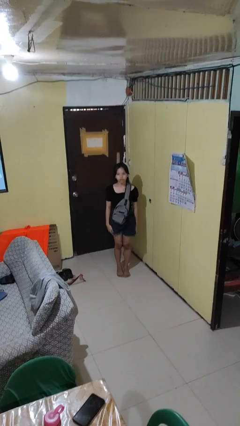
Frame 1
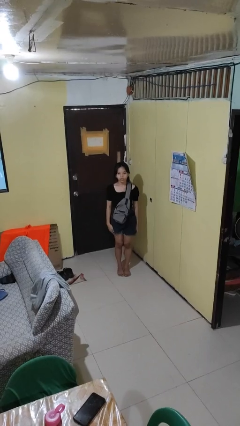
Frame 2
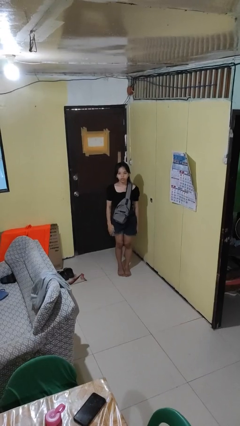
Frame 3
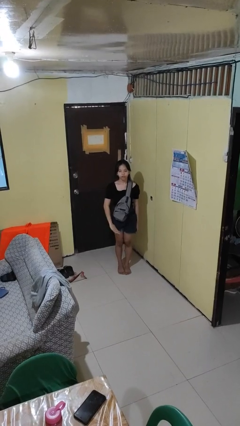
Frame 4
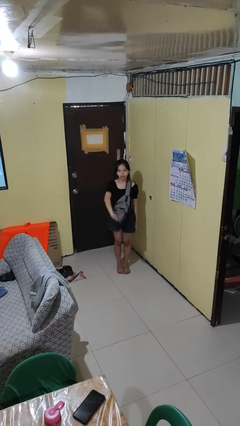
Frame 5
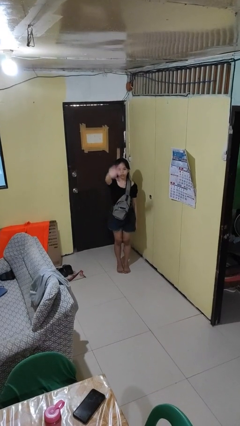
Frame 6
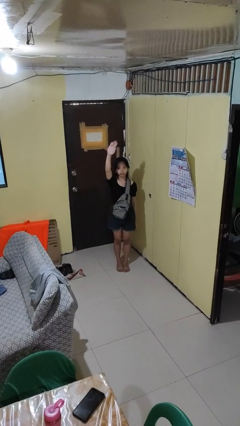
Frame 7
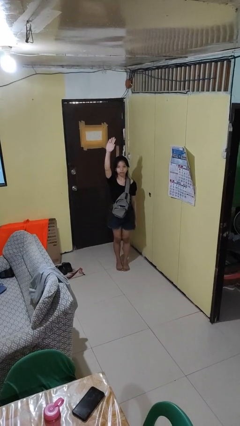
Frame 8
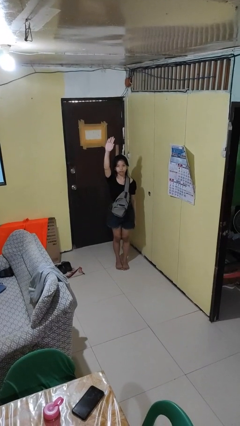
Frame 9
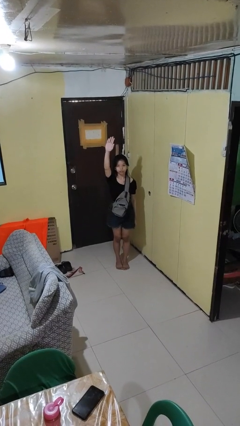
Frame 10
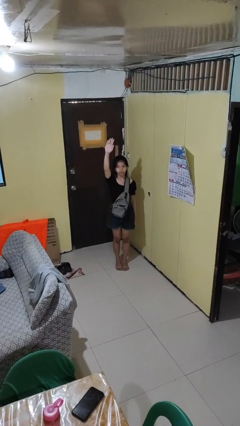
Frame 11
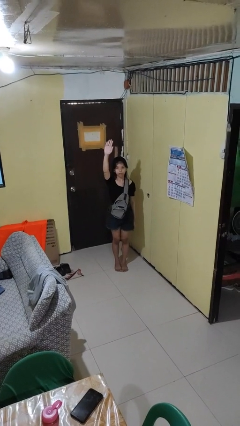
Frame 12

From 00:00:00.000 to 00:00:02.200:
person gestures swipe up

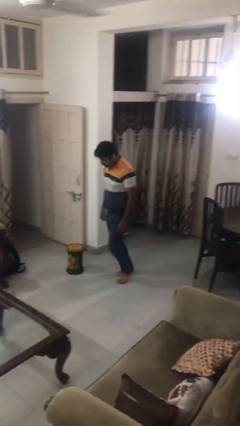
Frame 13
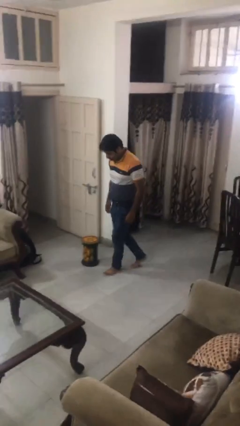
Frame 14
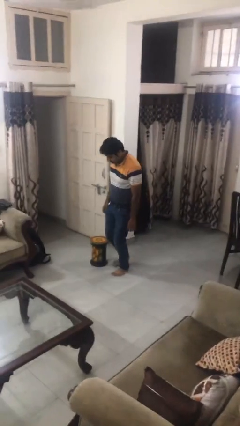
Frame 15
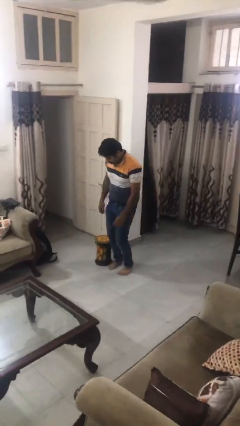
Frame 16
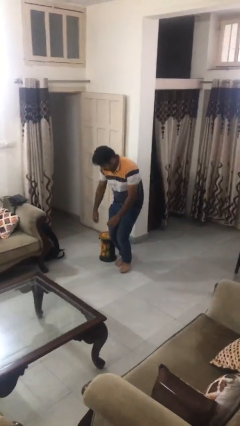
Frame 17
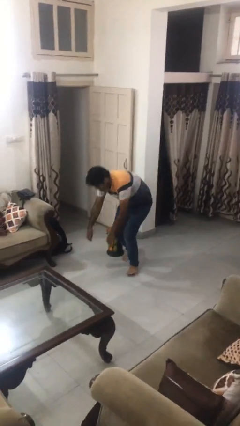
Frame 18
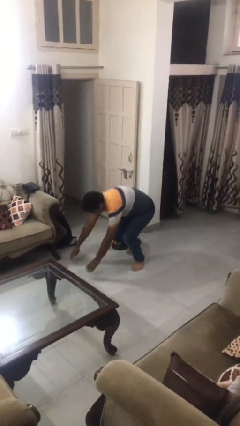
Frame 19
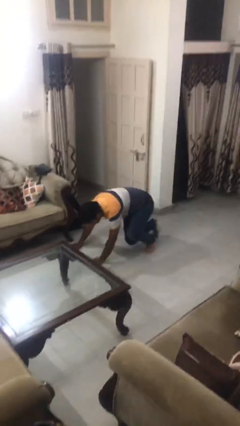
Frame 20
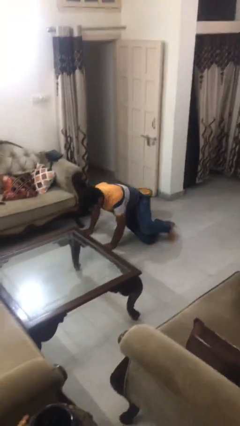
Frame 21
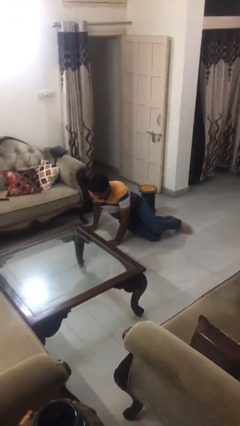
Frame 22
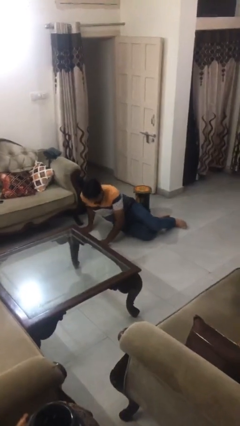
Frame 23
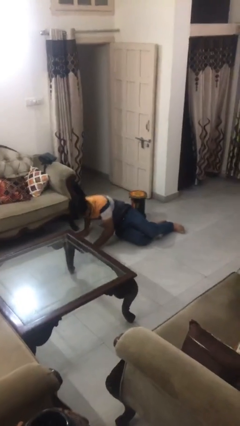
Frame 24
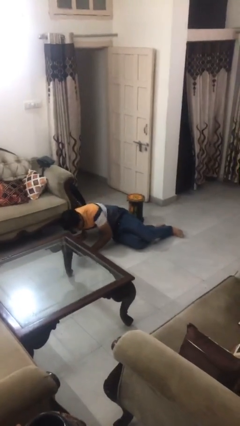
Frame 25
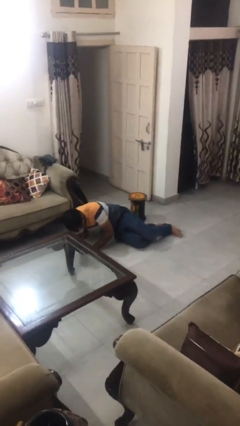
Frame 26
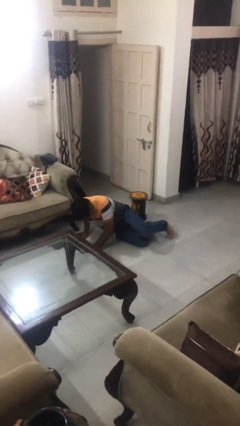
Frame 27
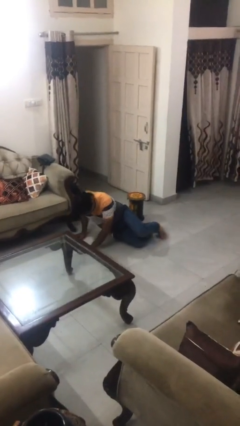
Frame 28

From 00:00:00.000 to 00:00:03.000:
person trips on object on floor

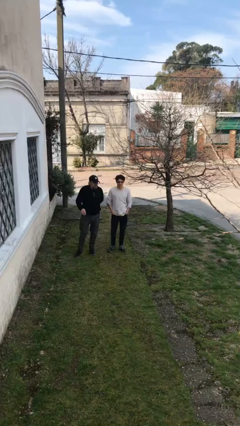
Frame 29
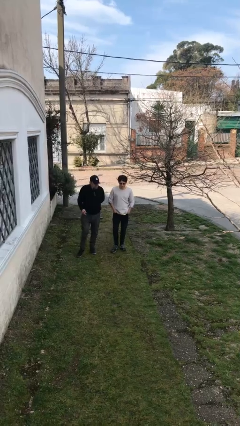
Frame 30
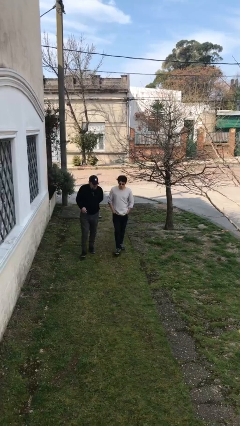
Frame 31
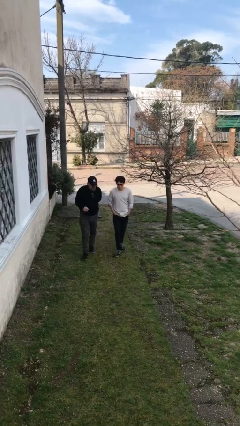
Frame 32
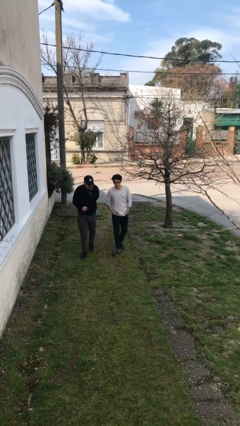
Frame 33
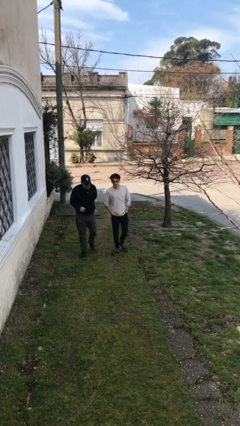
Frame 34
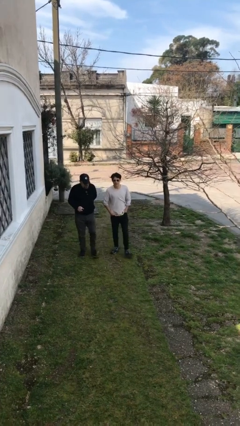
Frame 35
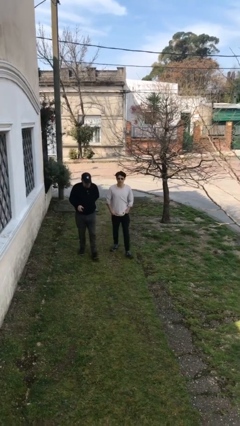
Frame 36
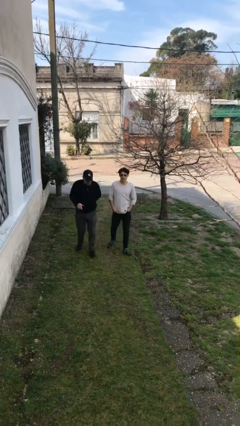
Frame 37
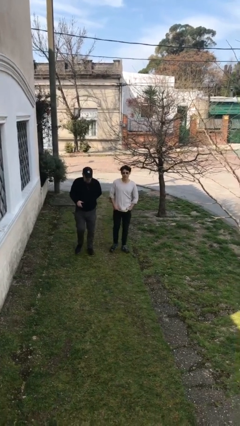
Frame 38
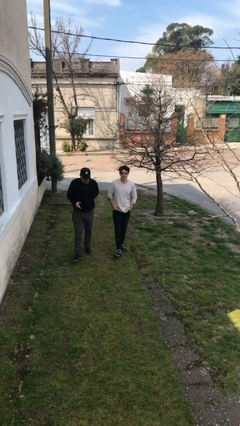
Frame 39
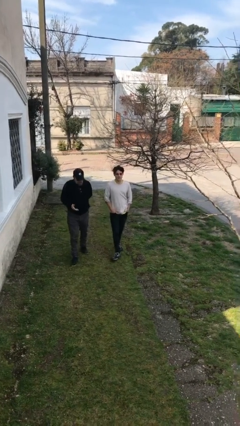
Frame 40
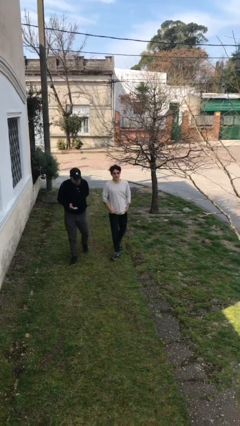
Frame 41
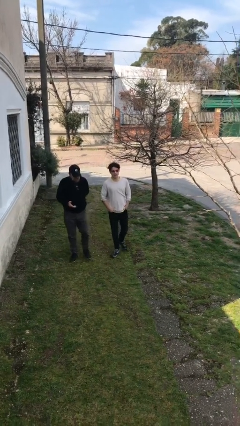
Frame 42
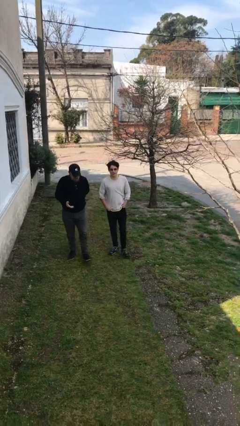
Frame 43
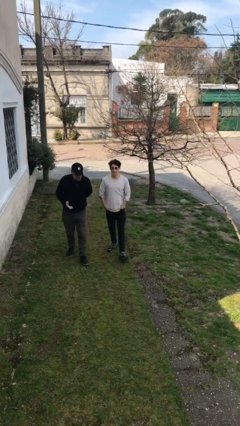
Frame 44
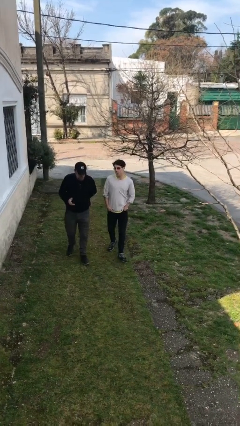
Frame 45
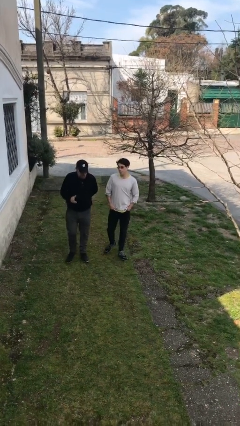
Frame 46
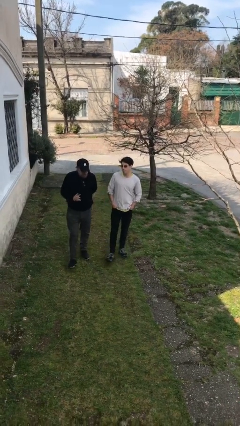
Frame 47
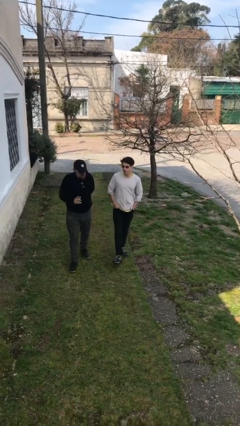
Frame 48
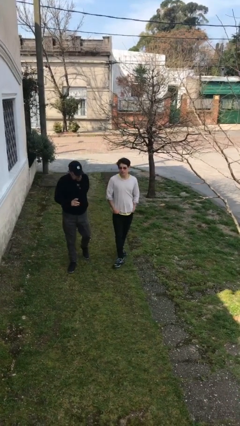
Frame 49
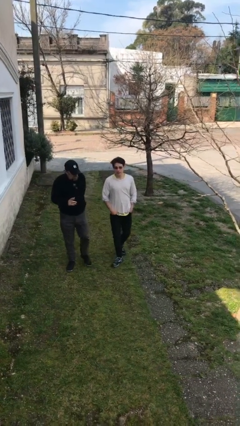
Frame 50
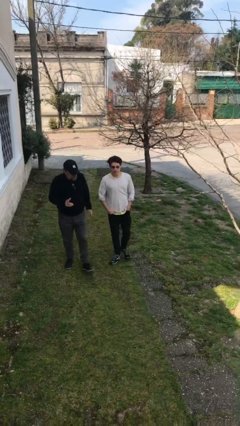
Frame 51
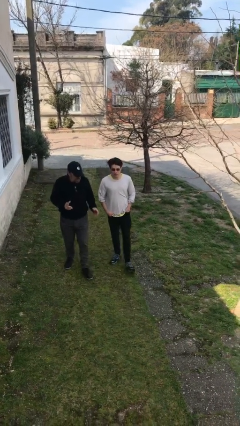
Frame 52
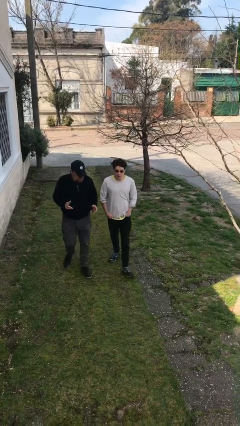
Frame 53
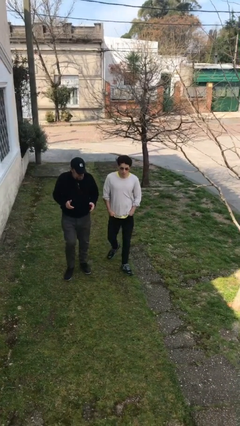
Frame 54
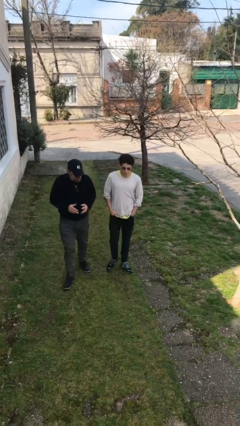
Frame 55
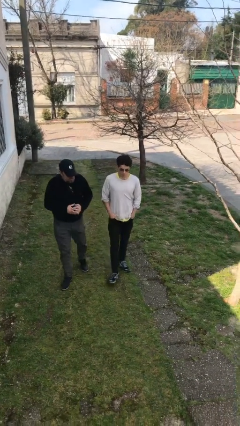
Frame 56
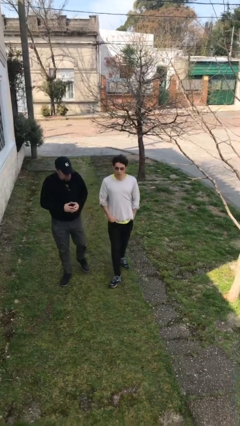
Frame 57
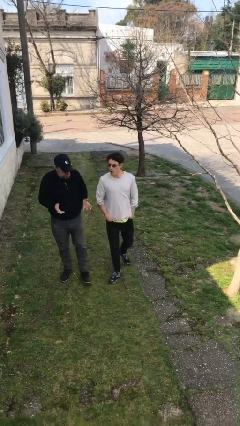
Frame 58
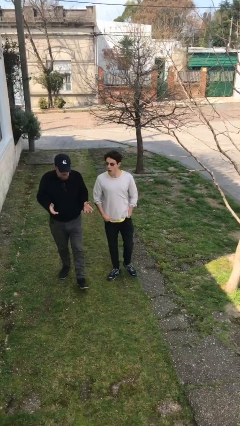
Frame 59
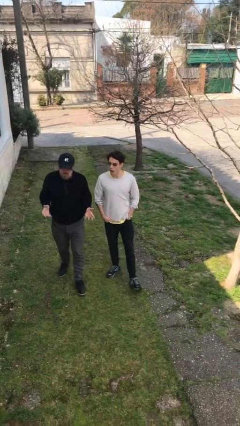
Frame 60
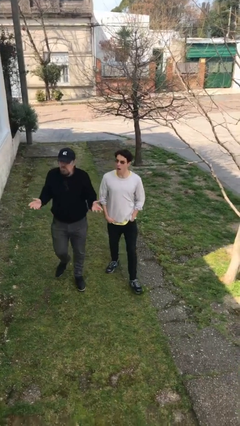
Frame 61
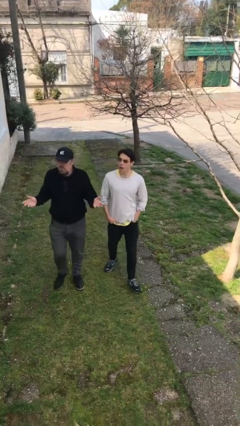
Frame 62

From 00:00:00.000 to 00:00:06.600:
person talks to person

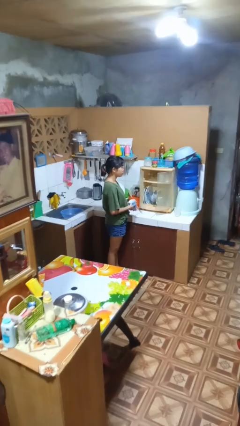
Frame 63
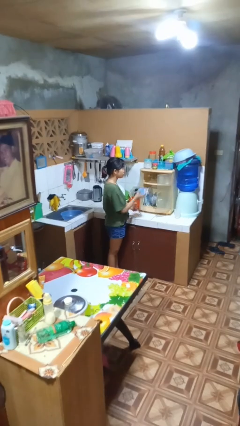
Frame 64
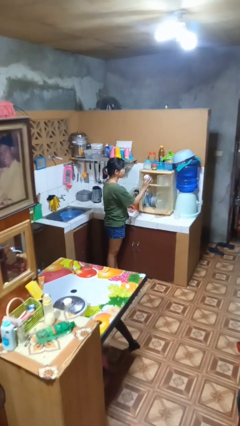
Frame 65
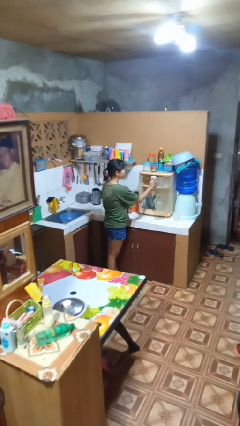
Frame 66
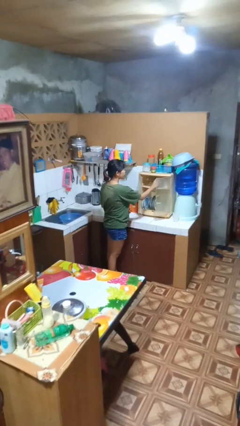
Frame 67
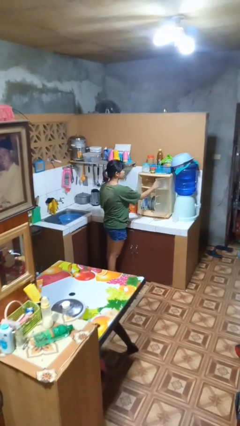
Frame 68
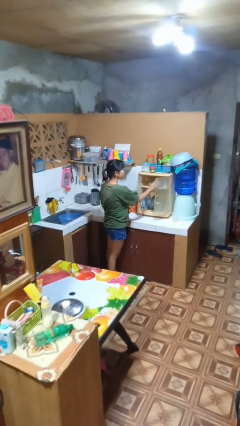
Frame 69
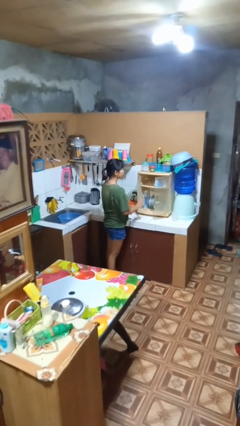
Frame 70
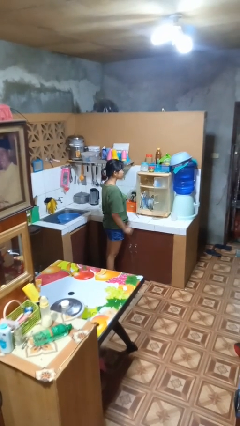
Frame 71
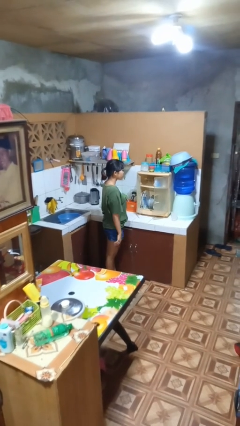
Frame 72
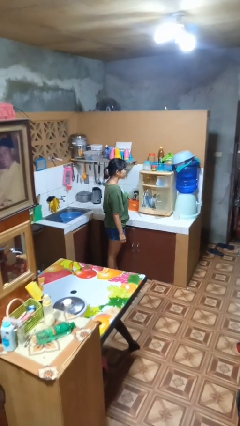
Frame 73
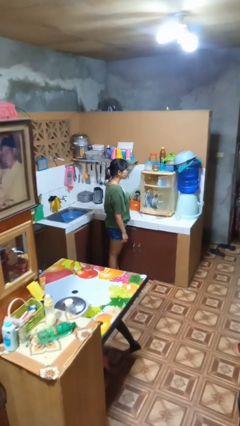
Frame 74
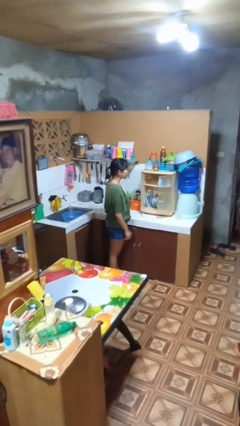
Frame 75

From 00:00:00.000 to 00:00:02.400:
person puts object in cabinet

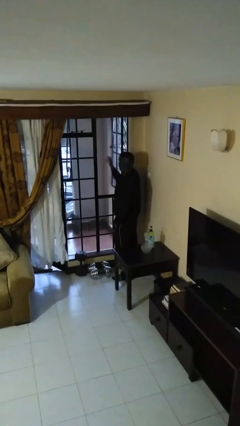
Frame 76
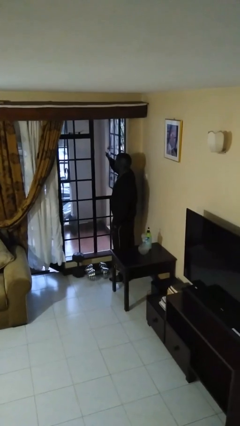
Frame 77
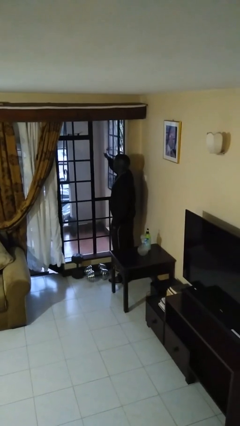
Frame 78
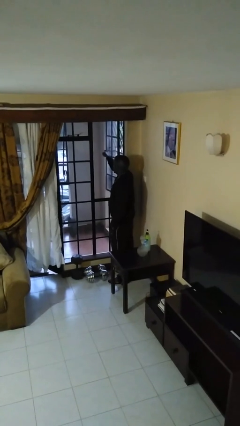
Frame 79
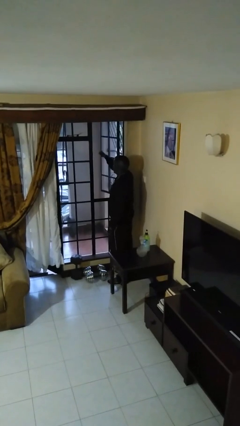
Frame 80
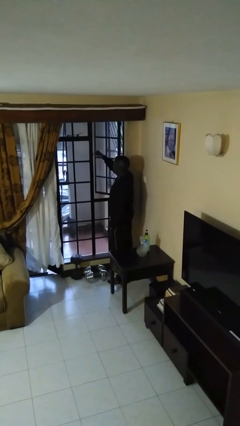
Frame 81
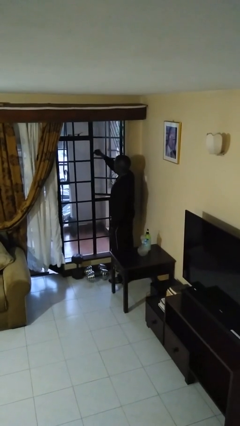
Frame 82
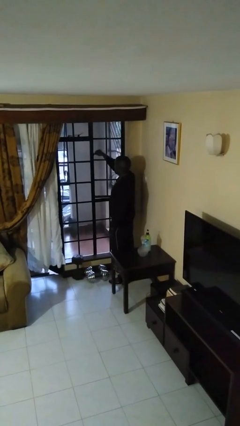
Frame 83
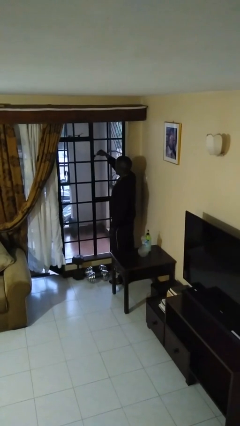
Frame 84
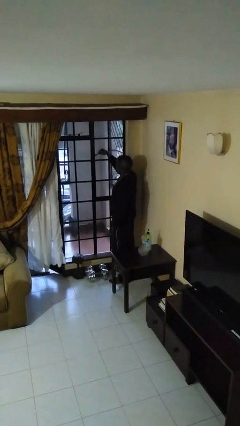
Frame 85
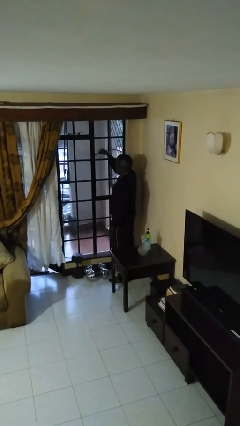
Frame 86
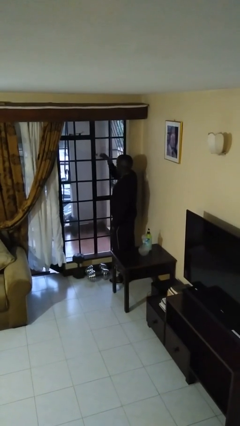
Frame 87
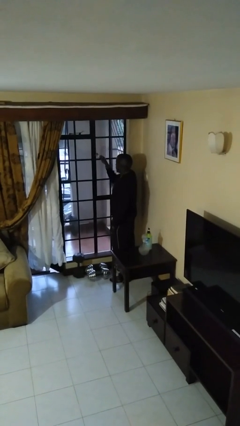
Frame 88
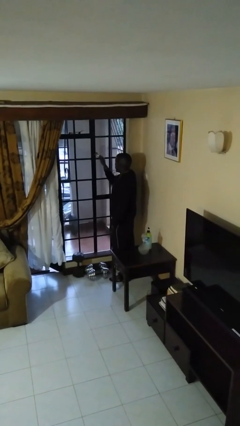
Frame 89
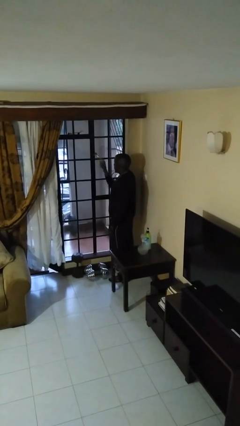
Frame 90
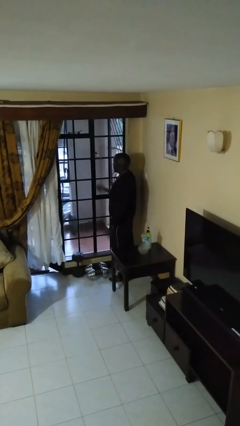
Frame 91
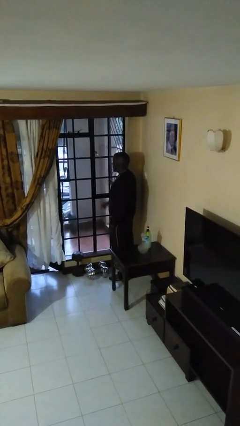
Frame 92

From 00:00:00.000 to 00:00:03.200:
person closes home window
